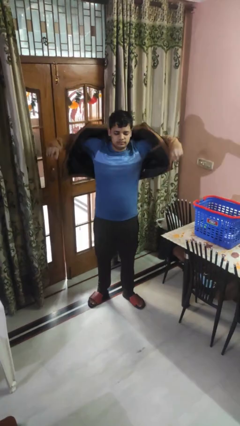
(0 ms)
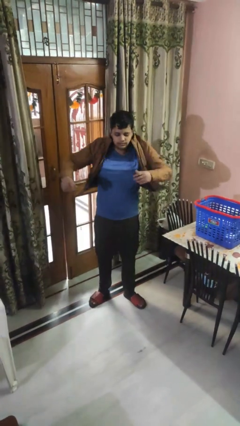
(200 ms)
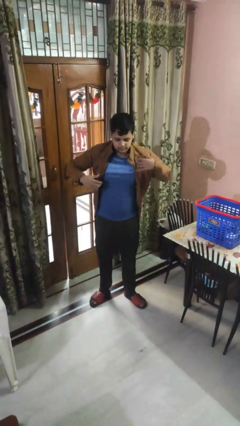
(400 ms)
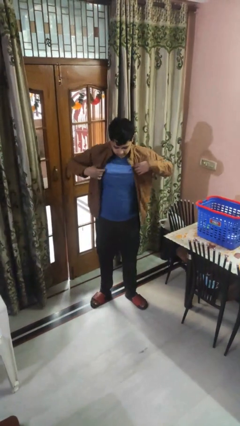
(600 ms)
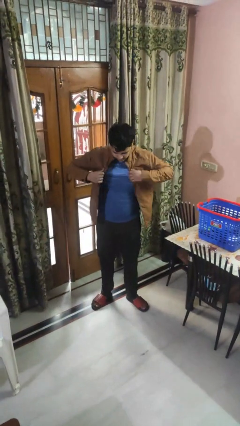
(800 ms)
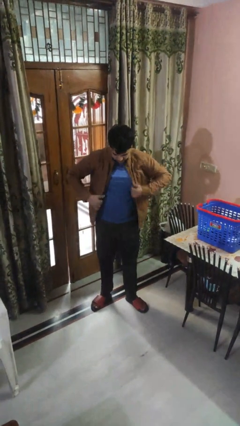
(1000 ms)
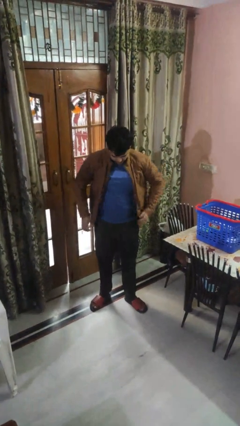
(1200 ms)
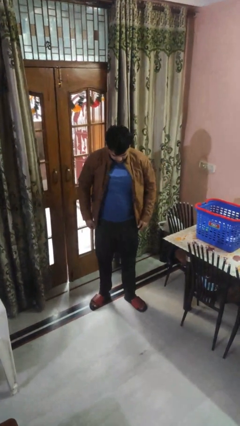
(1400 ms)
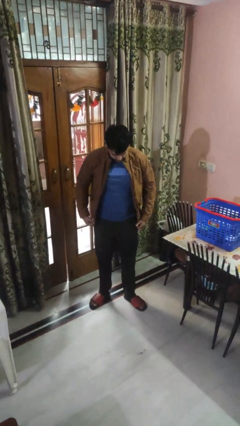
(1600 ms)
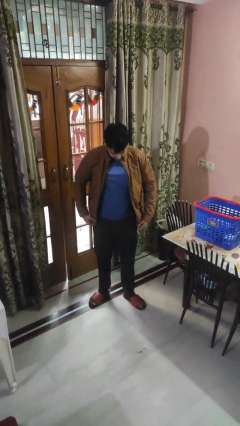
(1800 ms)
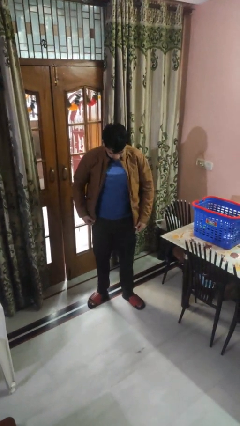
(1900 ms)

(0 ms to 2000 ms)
person puts on jacket

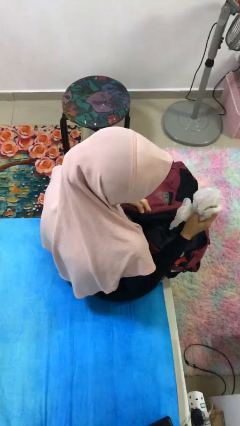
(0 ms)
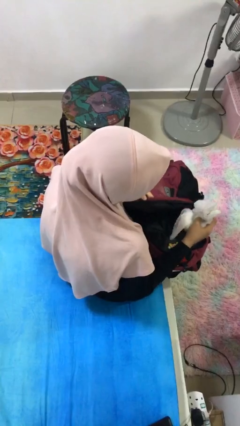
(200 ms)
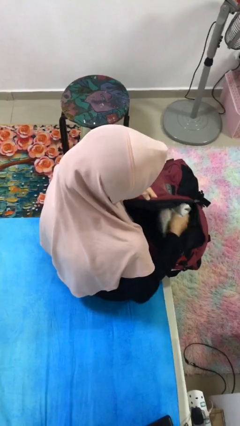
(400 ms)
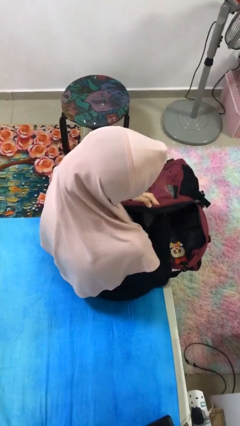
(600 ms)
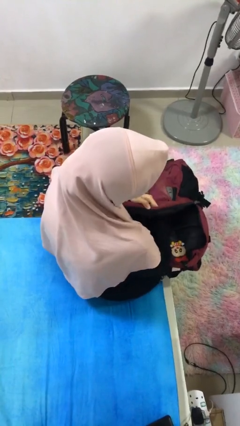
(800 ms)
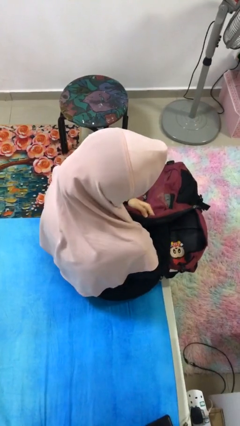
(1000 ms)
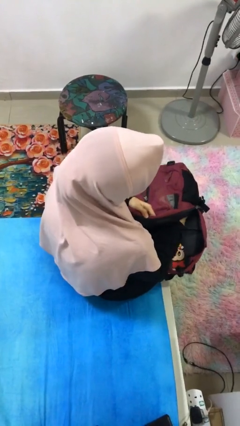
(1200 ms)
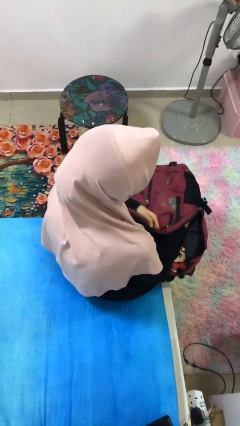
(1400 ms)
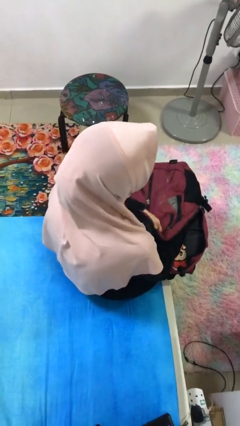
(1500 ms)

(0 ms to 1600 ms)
person puts object into backpack

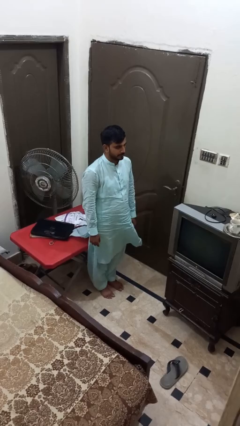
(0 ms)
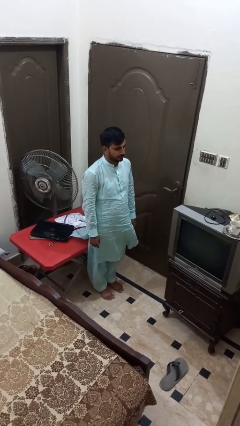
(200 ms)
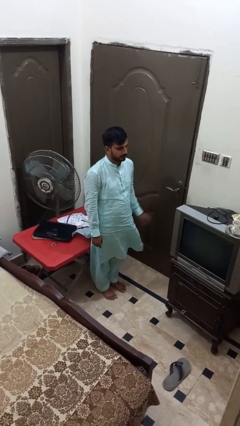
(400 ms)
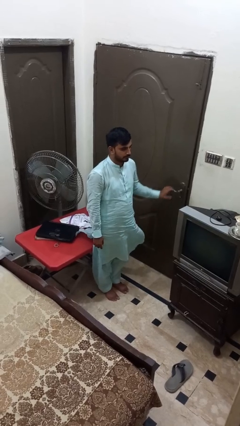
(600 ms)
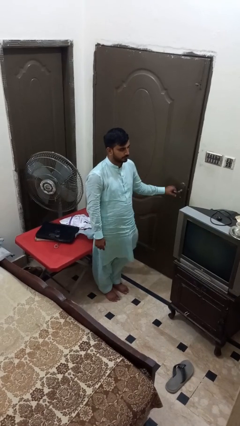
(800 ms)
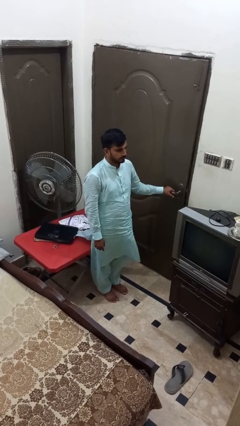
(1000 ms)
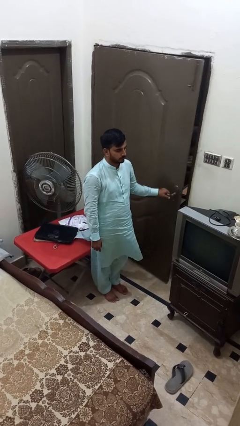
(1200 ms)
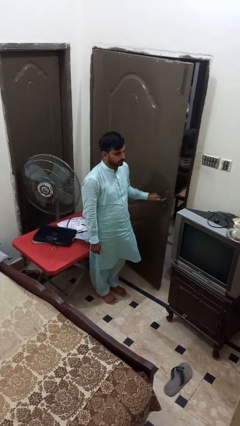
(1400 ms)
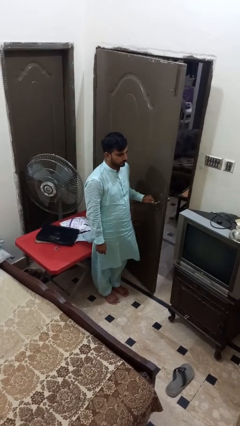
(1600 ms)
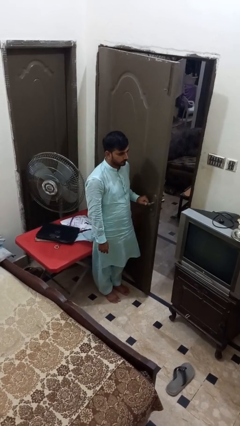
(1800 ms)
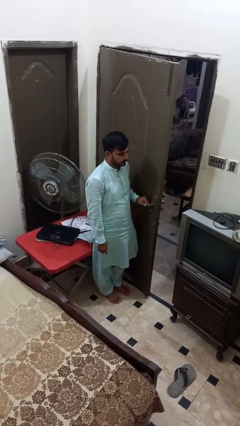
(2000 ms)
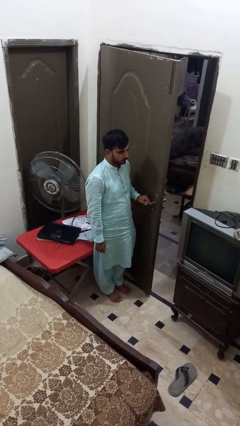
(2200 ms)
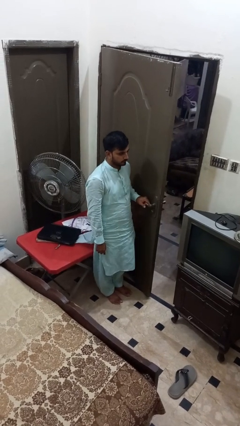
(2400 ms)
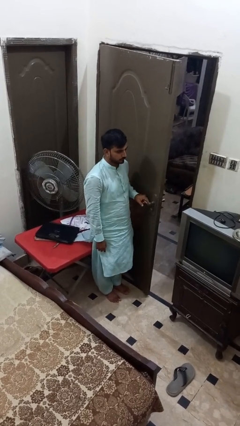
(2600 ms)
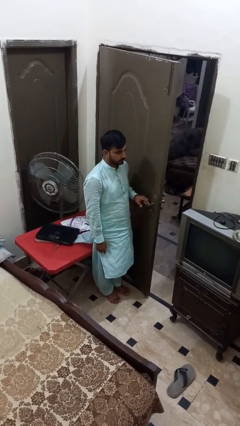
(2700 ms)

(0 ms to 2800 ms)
person opens facility door

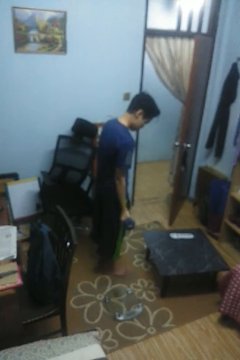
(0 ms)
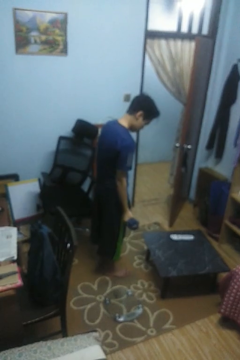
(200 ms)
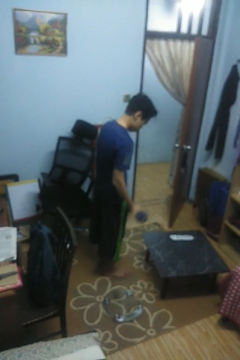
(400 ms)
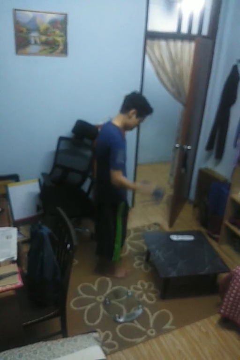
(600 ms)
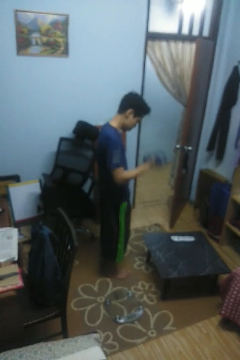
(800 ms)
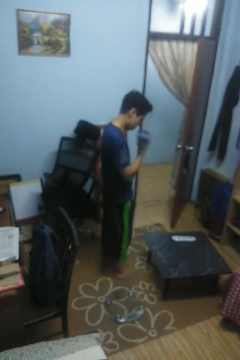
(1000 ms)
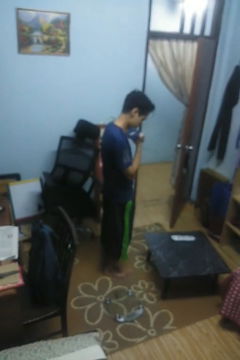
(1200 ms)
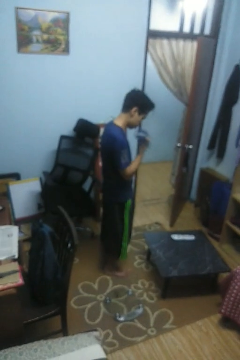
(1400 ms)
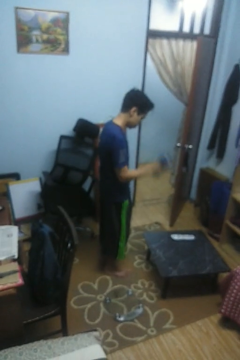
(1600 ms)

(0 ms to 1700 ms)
person lifts dumbbells

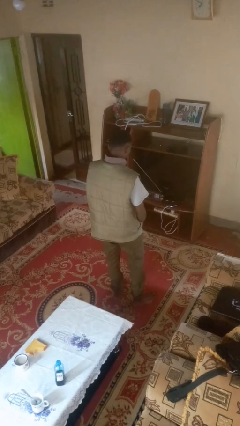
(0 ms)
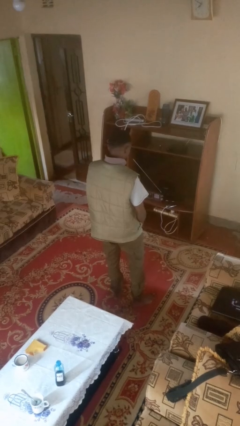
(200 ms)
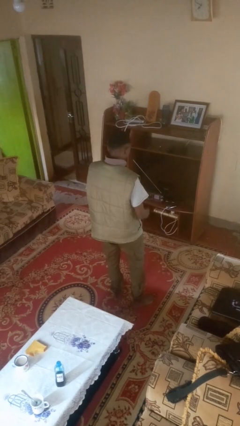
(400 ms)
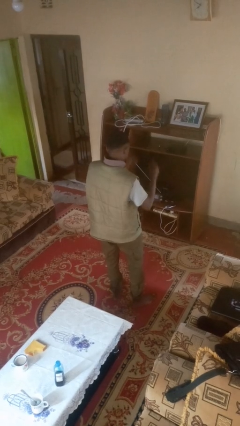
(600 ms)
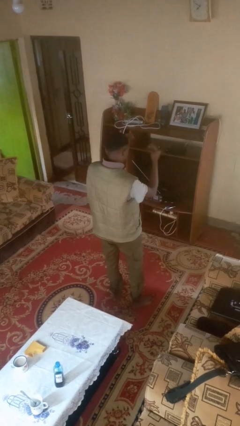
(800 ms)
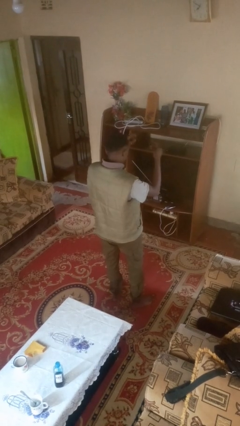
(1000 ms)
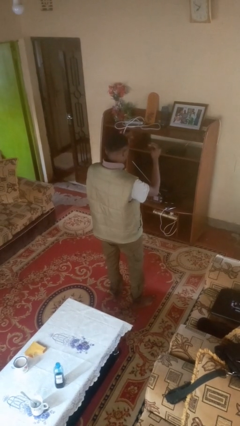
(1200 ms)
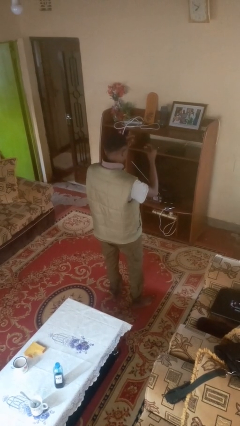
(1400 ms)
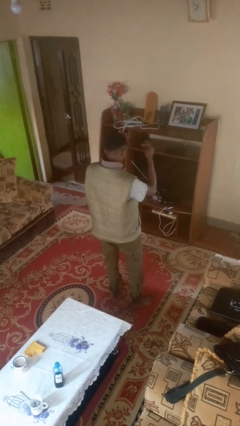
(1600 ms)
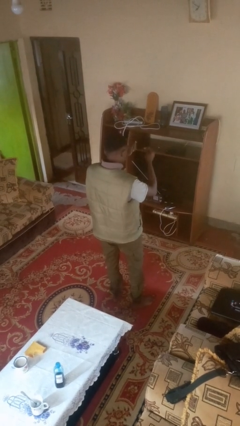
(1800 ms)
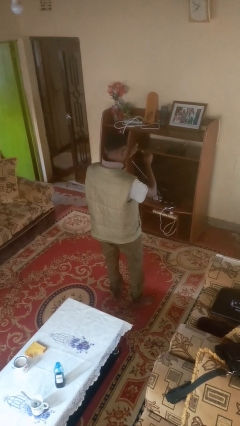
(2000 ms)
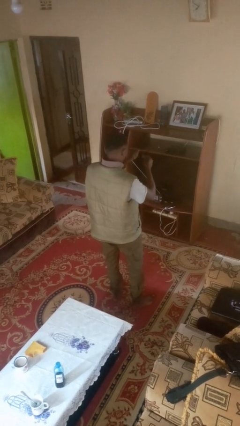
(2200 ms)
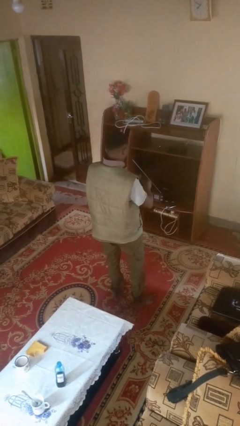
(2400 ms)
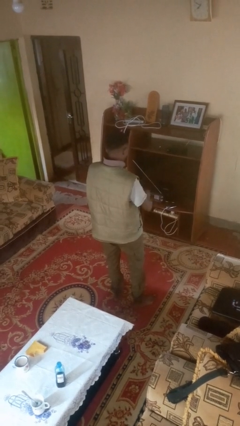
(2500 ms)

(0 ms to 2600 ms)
person snaps fingers

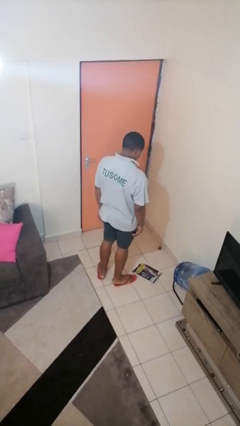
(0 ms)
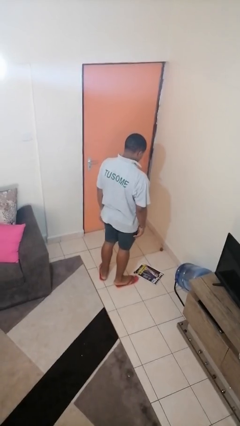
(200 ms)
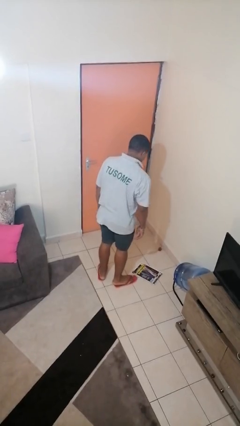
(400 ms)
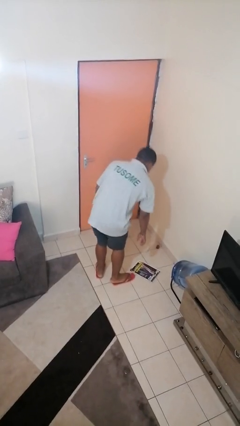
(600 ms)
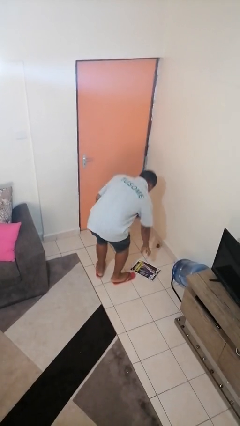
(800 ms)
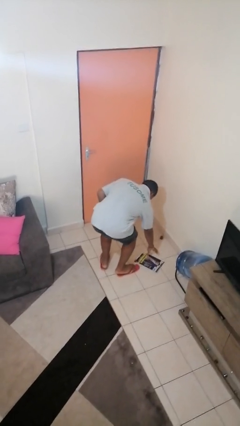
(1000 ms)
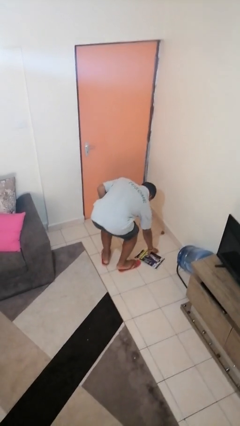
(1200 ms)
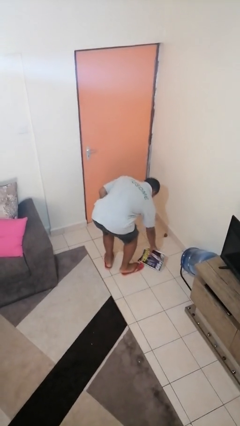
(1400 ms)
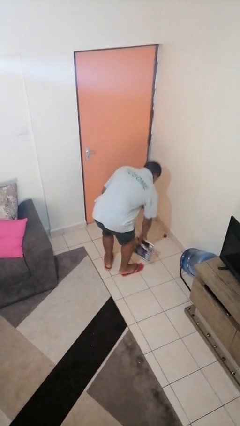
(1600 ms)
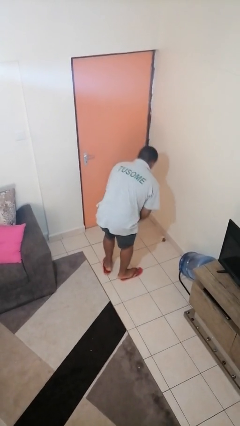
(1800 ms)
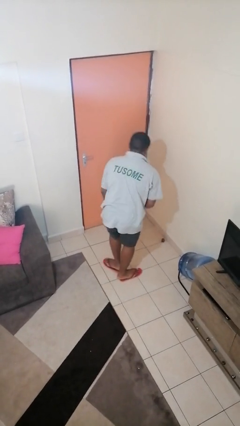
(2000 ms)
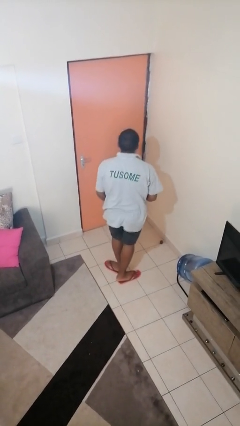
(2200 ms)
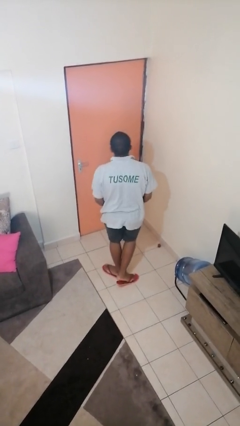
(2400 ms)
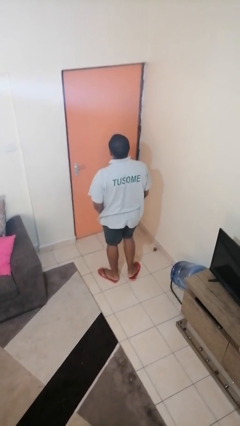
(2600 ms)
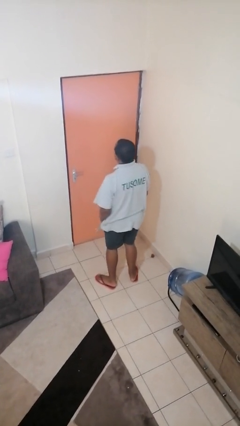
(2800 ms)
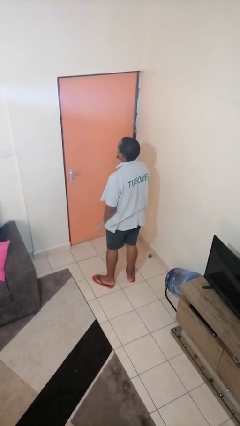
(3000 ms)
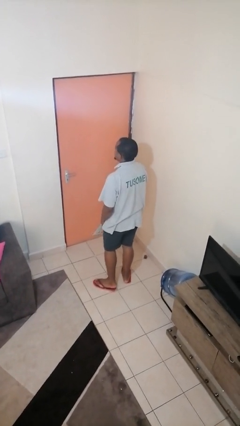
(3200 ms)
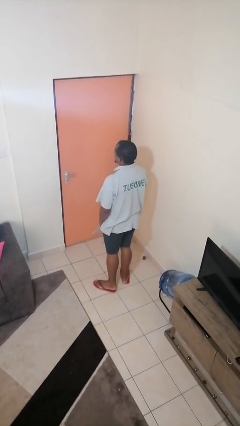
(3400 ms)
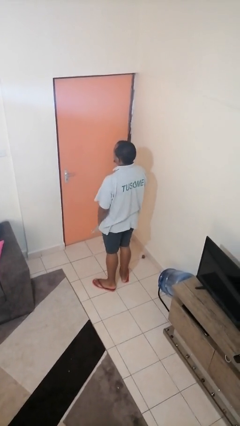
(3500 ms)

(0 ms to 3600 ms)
person picks up object from floor

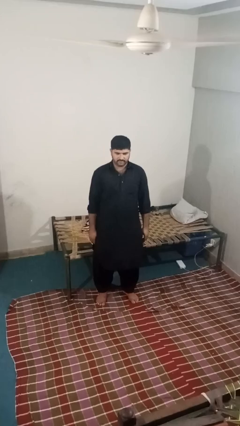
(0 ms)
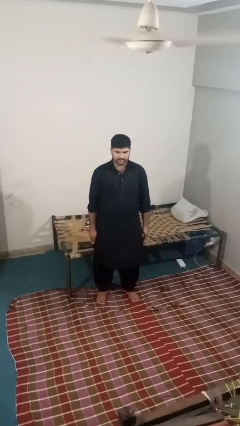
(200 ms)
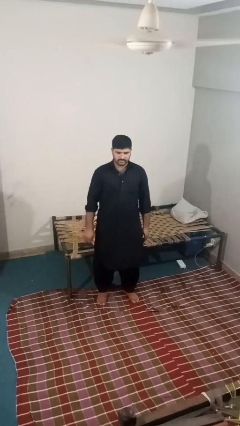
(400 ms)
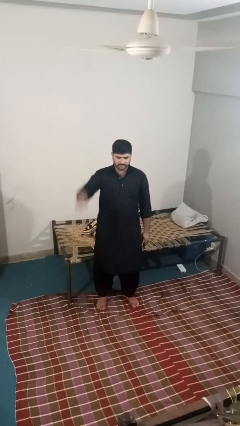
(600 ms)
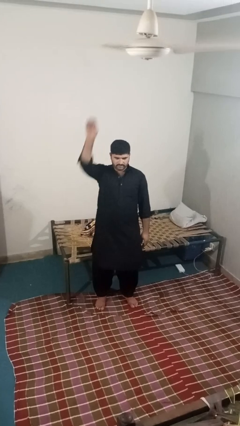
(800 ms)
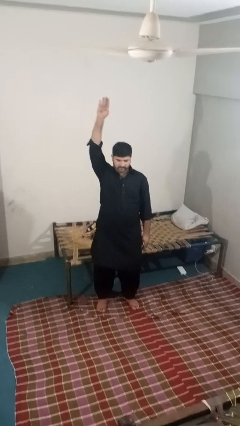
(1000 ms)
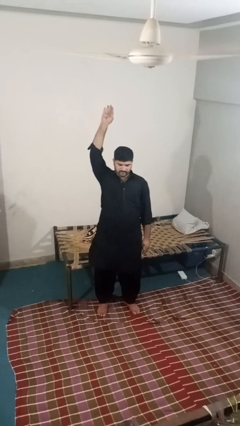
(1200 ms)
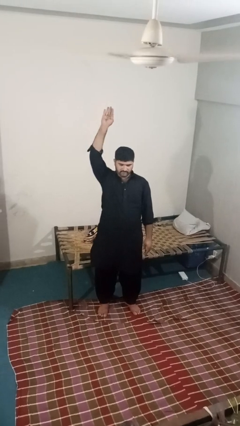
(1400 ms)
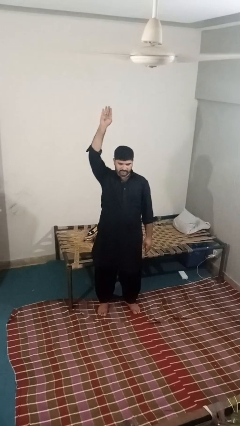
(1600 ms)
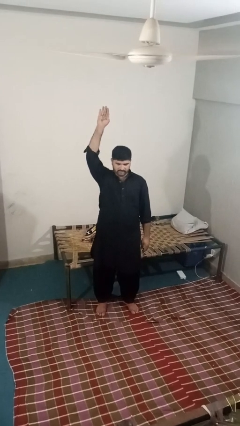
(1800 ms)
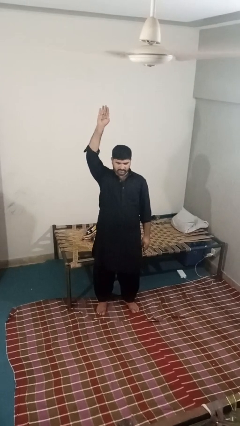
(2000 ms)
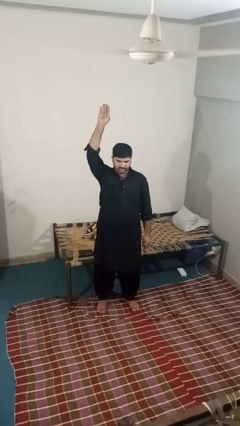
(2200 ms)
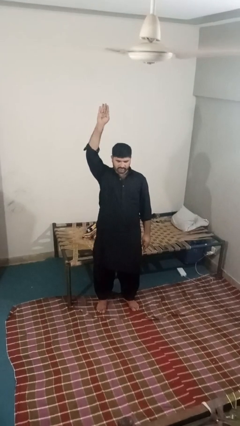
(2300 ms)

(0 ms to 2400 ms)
person gestures raise hand

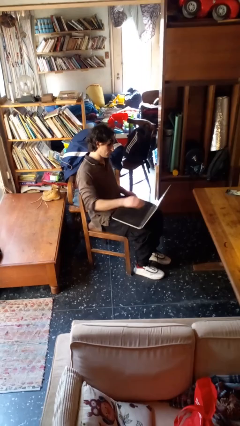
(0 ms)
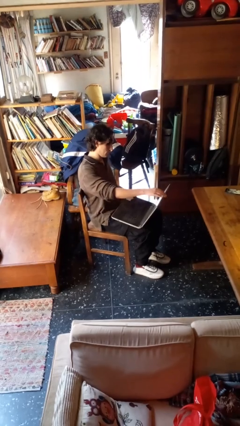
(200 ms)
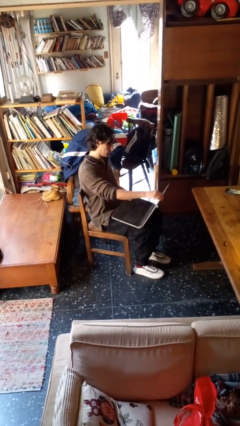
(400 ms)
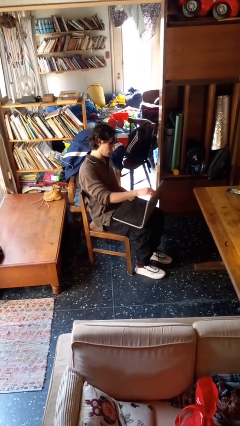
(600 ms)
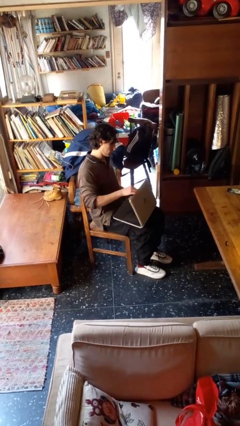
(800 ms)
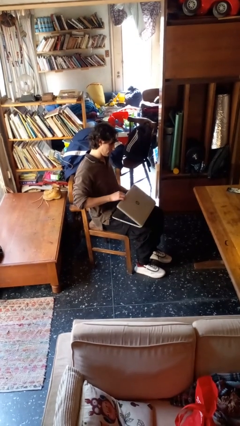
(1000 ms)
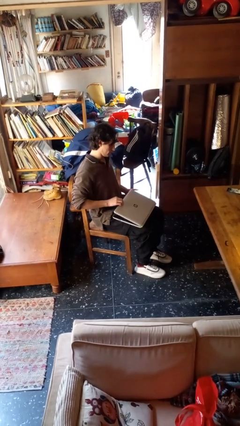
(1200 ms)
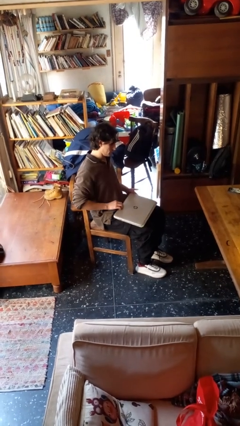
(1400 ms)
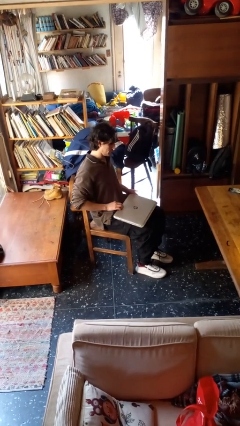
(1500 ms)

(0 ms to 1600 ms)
person closes laptop
